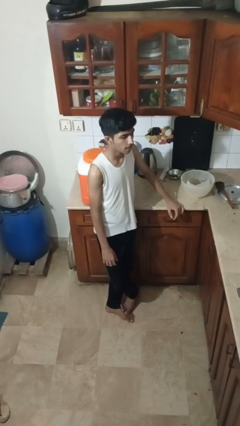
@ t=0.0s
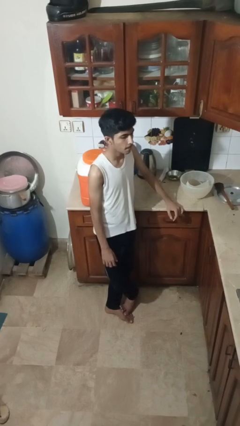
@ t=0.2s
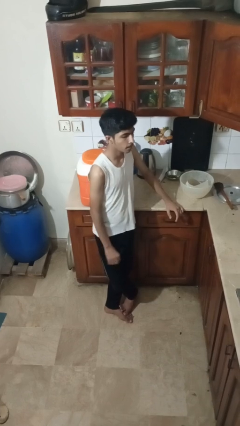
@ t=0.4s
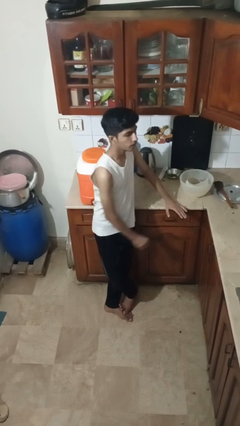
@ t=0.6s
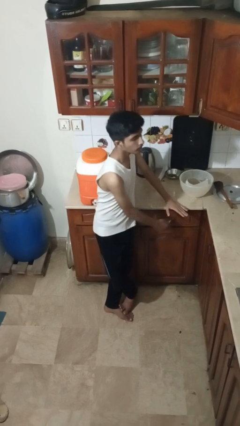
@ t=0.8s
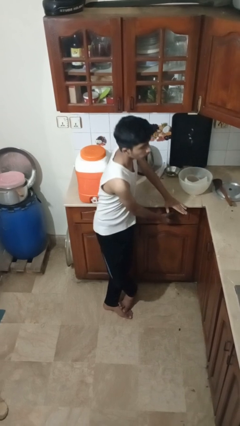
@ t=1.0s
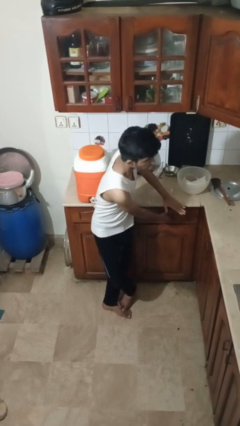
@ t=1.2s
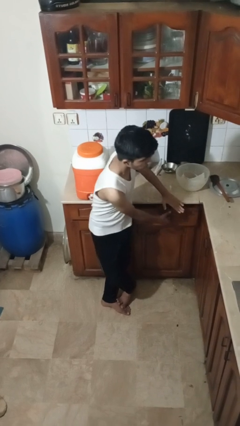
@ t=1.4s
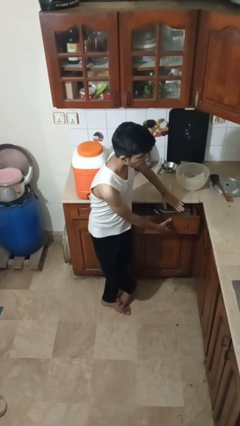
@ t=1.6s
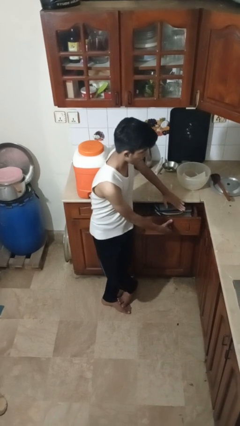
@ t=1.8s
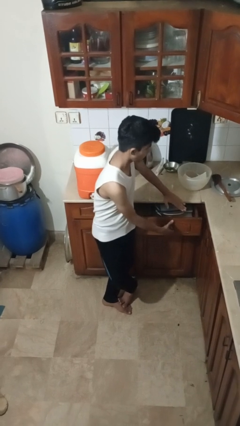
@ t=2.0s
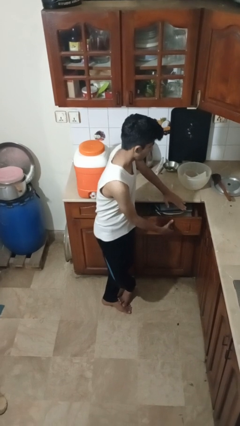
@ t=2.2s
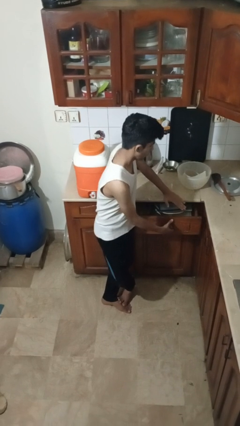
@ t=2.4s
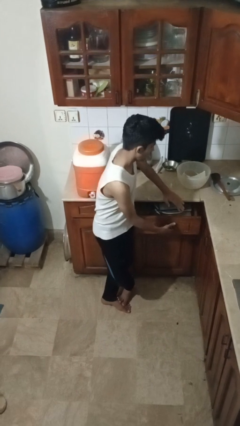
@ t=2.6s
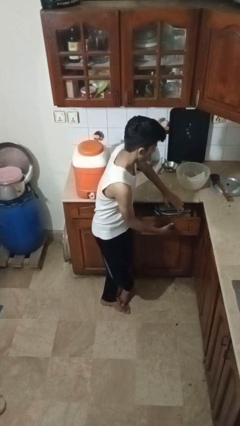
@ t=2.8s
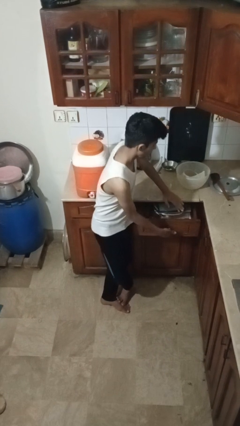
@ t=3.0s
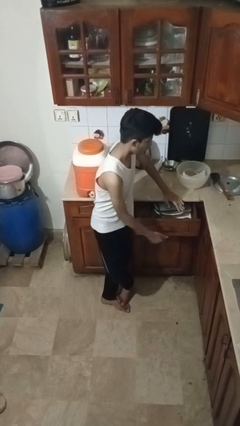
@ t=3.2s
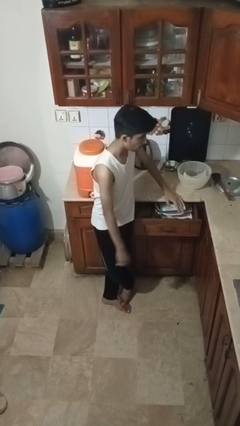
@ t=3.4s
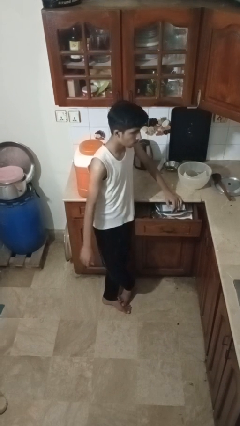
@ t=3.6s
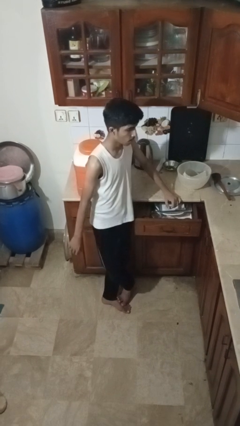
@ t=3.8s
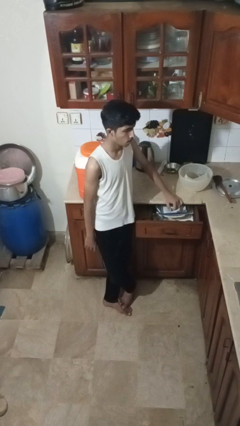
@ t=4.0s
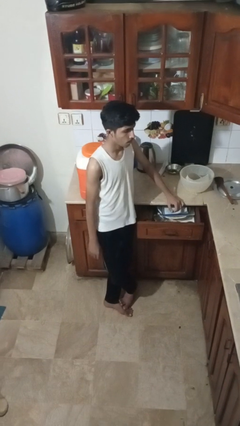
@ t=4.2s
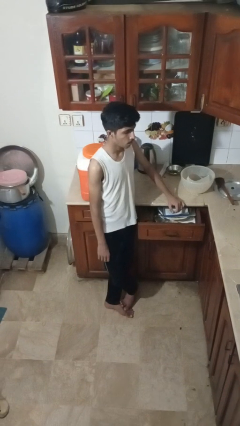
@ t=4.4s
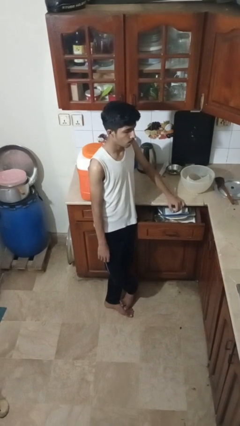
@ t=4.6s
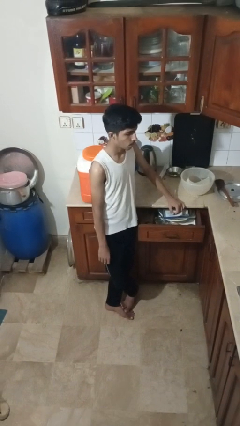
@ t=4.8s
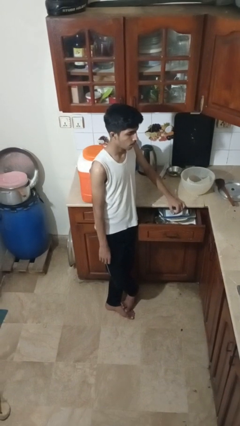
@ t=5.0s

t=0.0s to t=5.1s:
person opens kitchen drawer

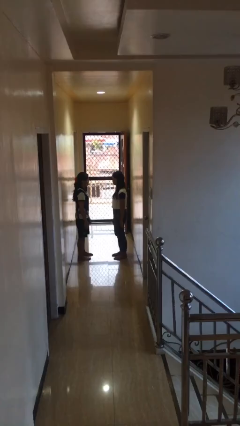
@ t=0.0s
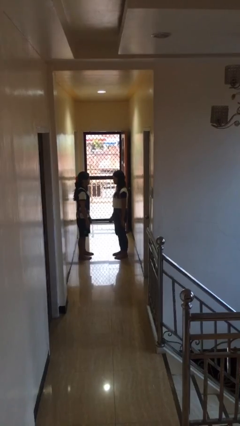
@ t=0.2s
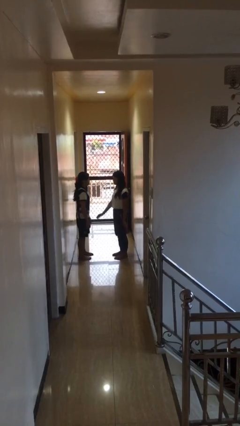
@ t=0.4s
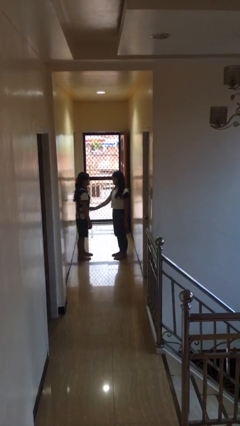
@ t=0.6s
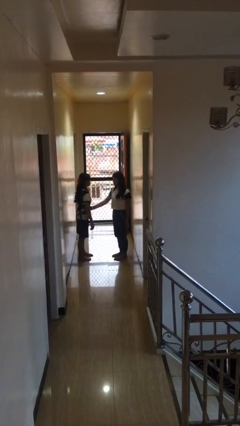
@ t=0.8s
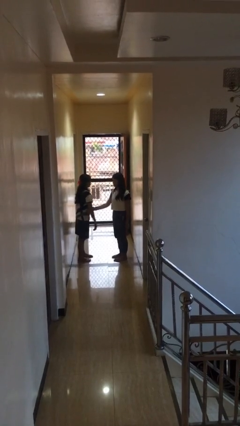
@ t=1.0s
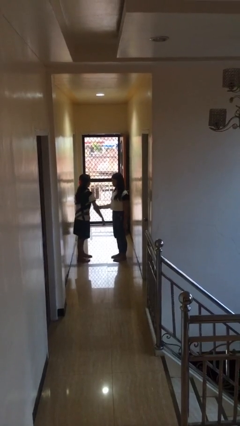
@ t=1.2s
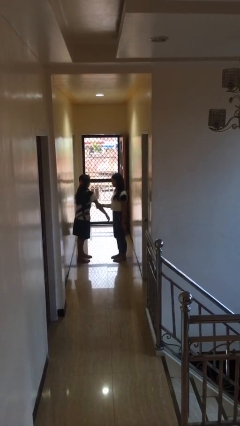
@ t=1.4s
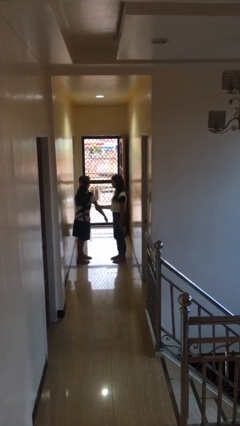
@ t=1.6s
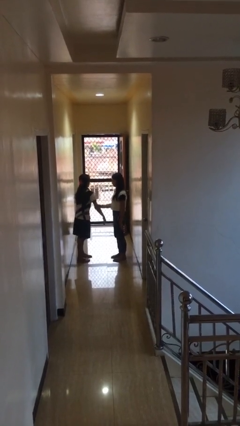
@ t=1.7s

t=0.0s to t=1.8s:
person grabs person by bicep

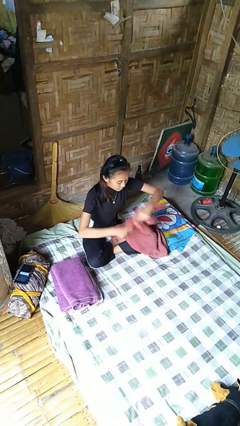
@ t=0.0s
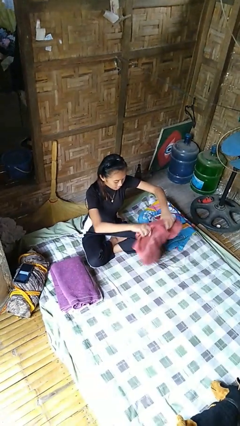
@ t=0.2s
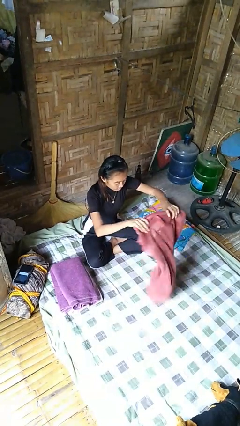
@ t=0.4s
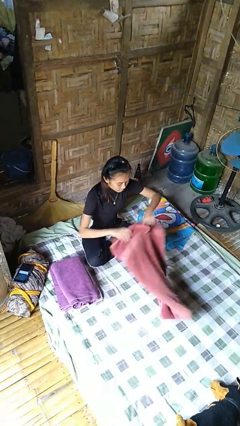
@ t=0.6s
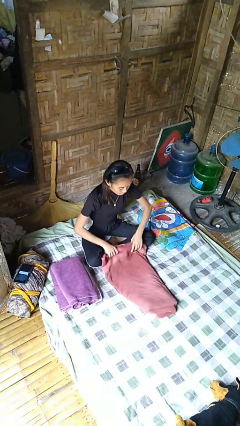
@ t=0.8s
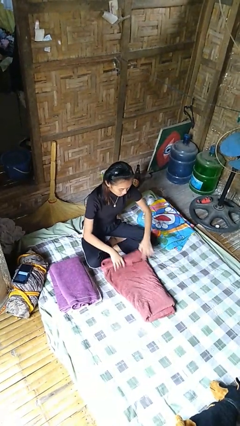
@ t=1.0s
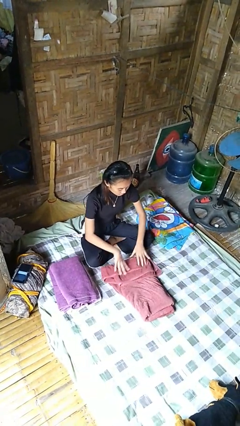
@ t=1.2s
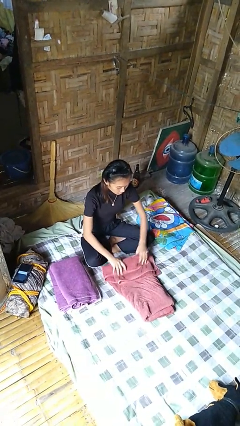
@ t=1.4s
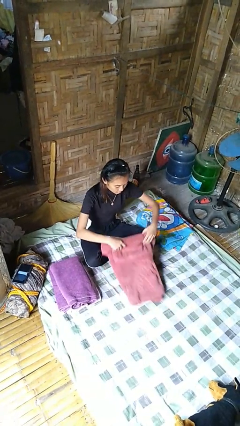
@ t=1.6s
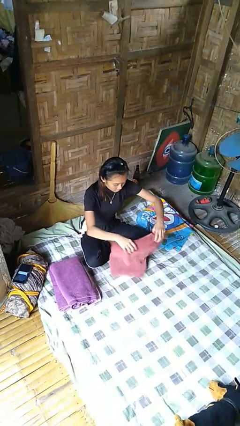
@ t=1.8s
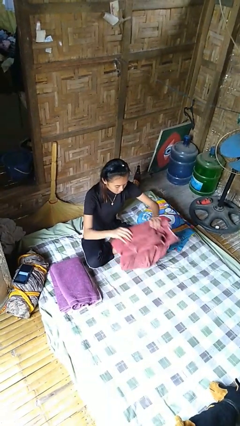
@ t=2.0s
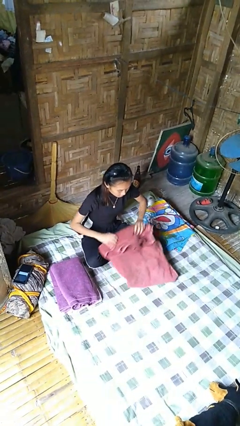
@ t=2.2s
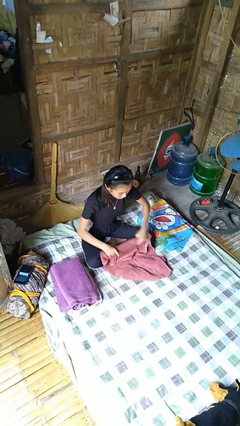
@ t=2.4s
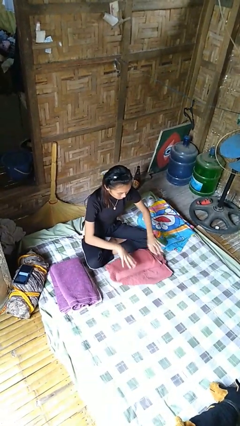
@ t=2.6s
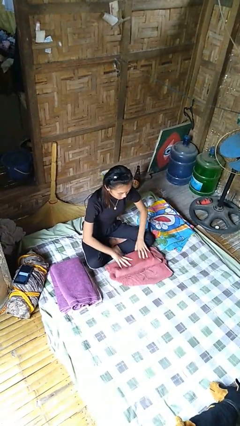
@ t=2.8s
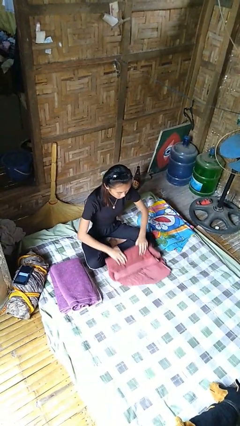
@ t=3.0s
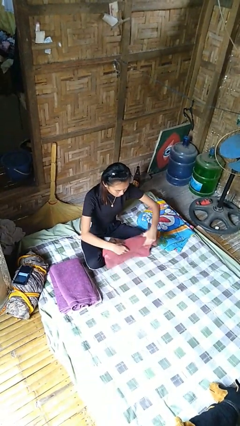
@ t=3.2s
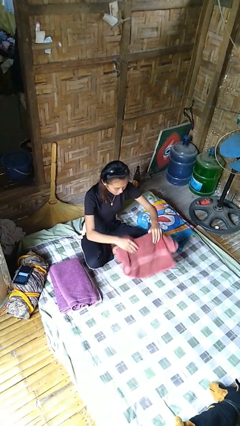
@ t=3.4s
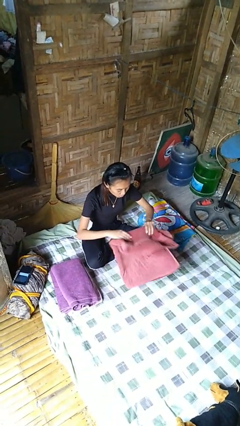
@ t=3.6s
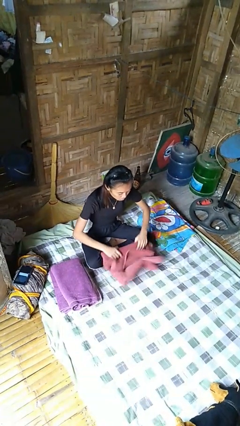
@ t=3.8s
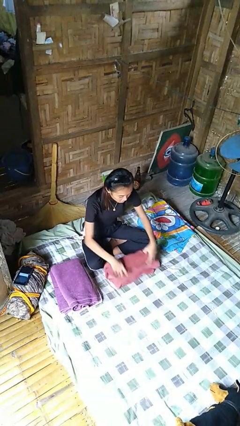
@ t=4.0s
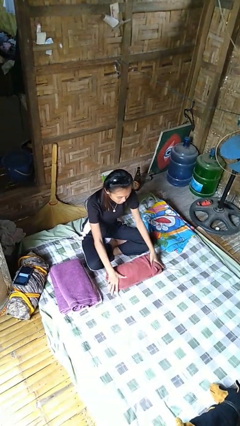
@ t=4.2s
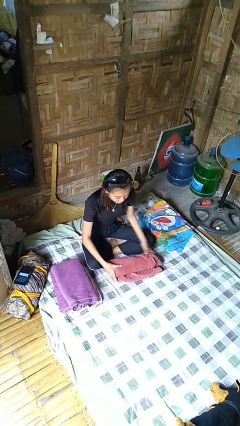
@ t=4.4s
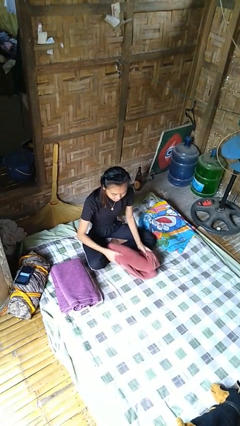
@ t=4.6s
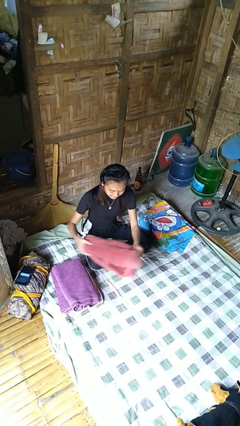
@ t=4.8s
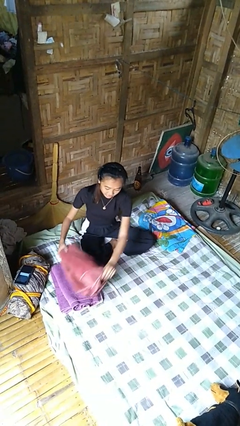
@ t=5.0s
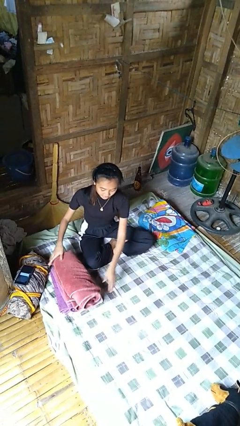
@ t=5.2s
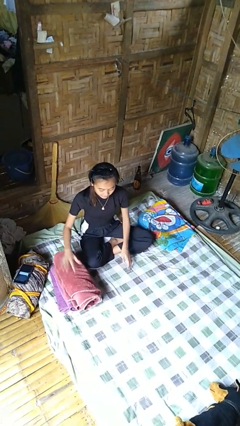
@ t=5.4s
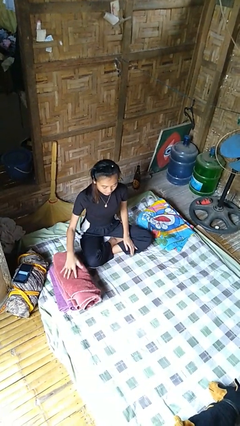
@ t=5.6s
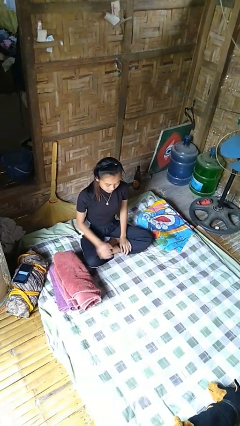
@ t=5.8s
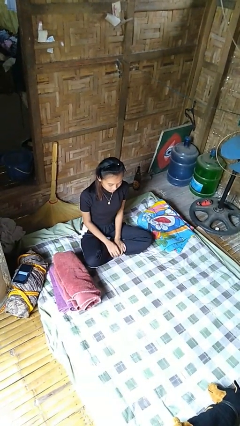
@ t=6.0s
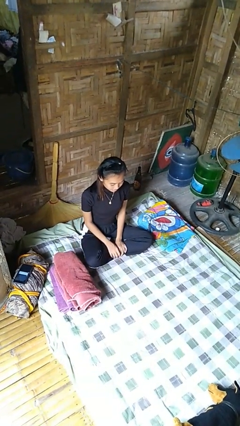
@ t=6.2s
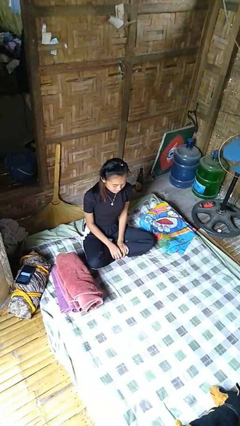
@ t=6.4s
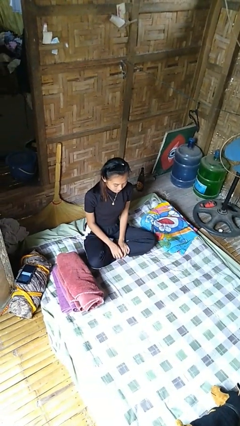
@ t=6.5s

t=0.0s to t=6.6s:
person folds towel

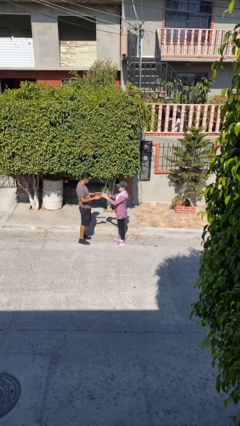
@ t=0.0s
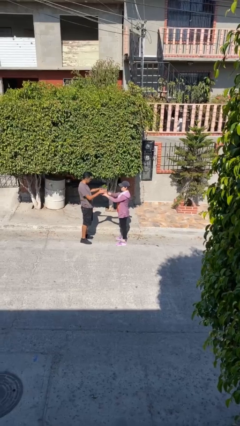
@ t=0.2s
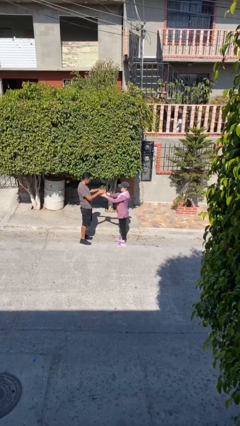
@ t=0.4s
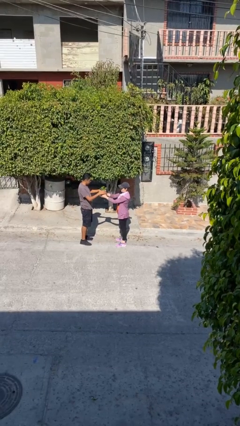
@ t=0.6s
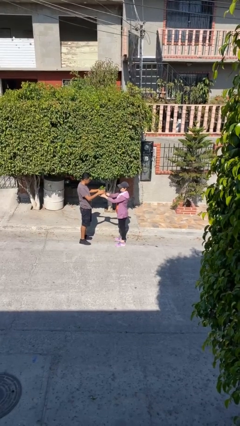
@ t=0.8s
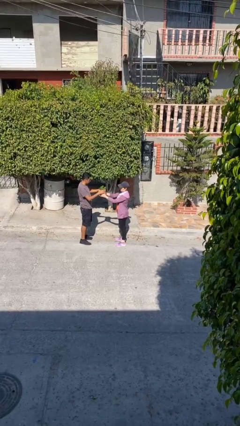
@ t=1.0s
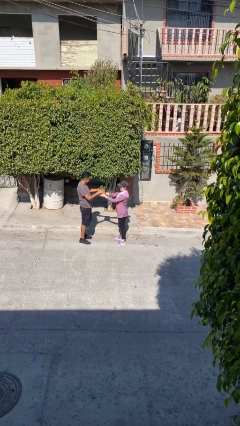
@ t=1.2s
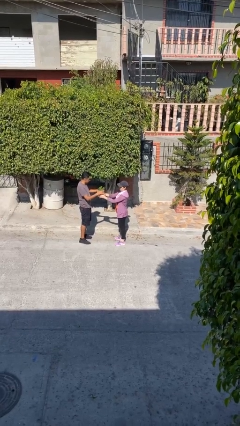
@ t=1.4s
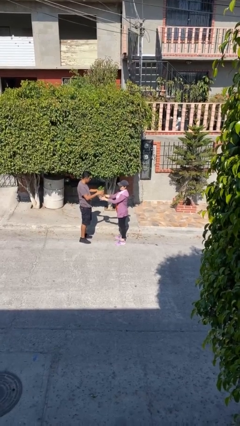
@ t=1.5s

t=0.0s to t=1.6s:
person transfers object to person

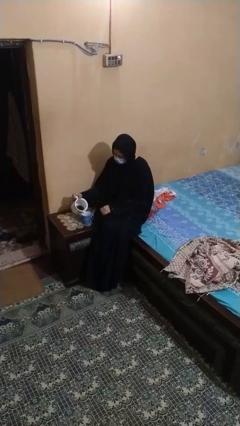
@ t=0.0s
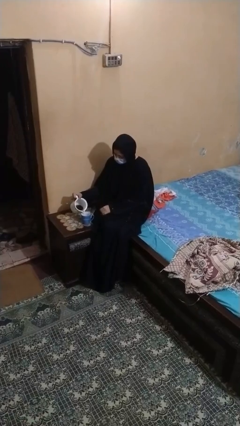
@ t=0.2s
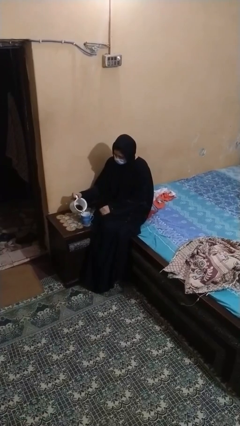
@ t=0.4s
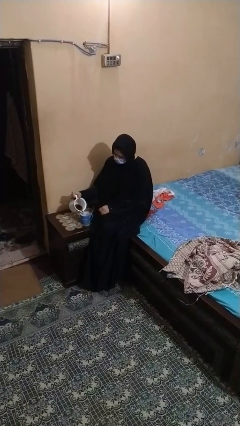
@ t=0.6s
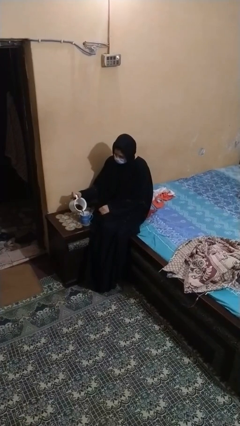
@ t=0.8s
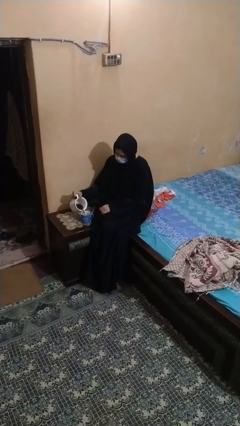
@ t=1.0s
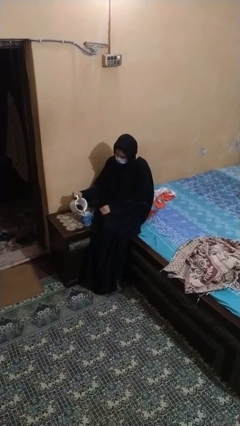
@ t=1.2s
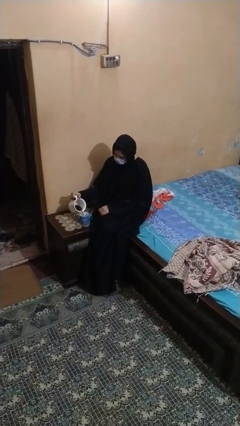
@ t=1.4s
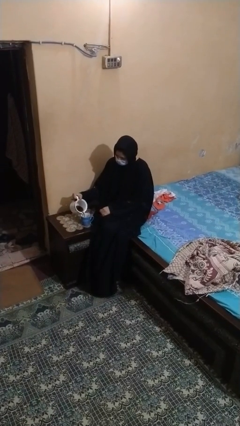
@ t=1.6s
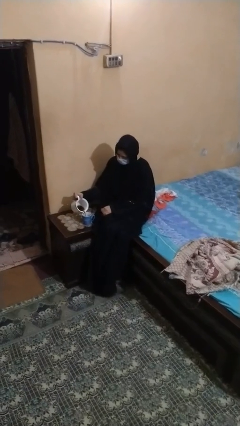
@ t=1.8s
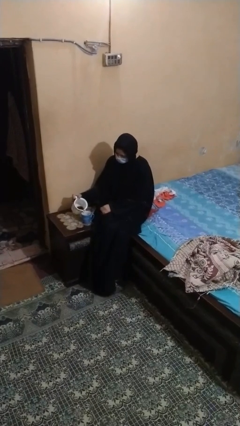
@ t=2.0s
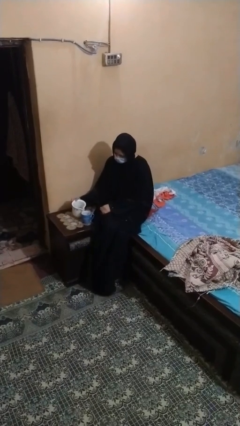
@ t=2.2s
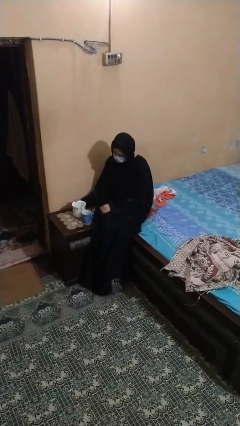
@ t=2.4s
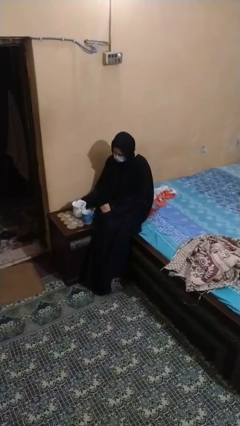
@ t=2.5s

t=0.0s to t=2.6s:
person pours coffee into mug
